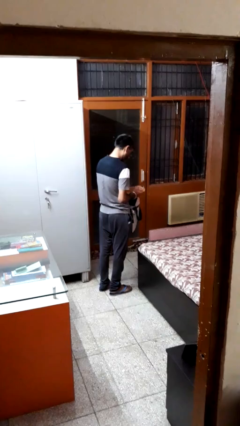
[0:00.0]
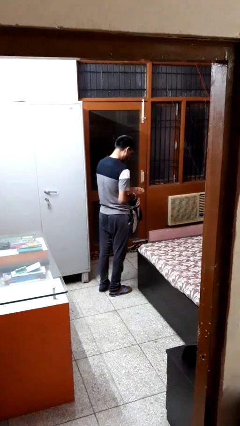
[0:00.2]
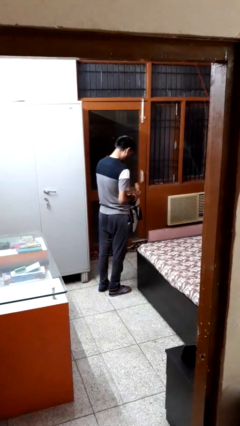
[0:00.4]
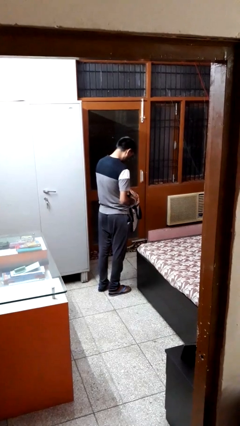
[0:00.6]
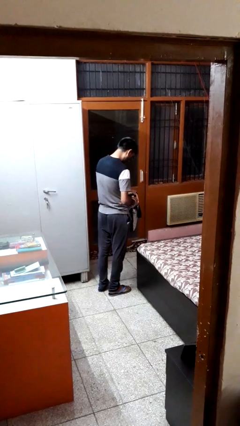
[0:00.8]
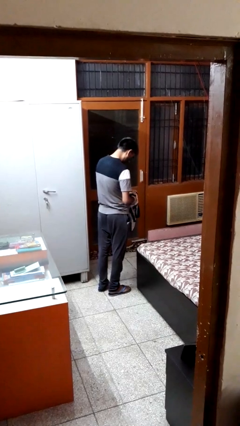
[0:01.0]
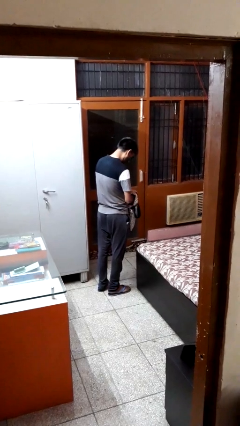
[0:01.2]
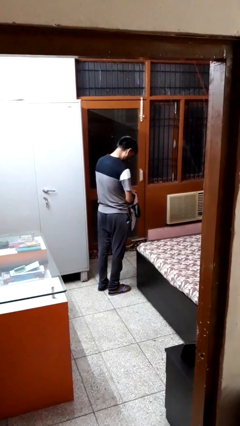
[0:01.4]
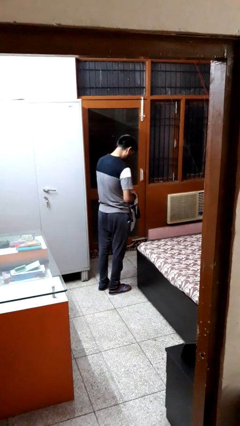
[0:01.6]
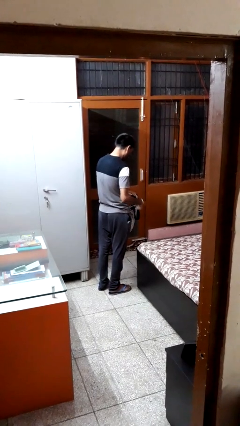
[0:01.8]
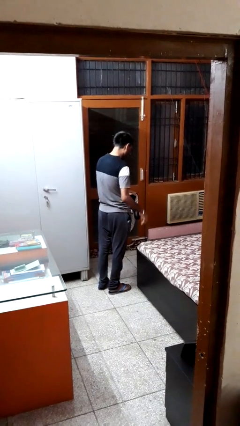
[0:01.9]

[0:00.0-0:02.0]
person puts object into bag

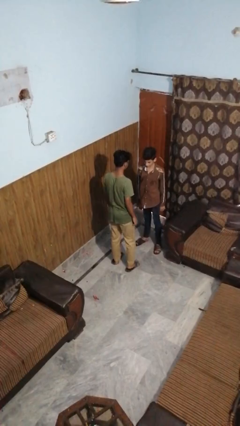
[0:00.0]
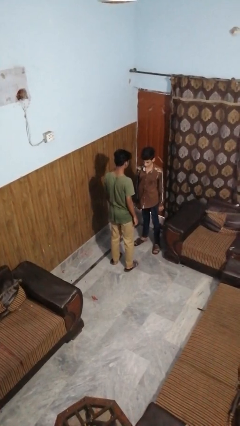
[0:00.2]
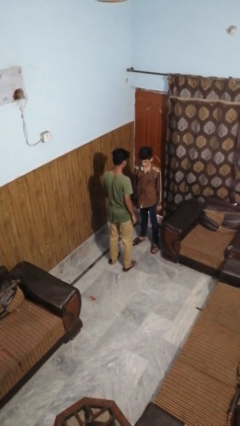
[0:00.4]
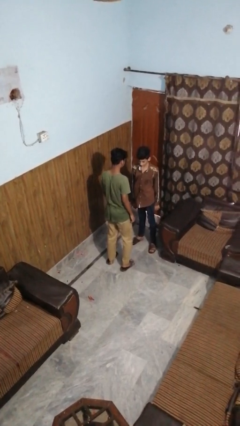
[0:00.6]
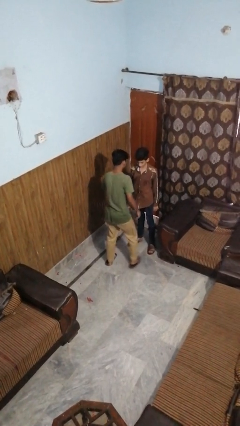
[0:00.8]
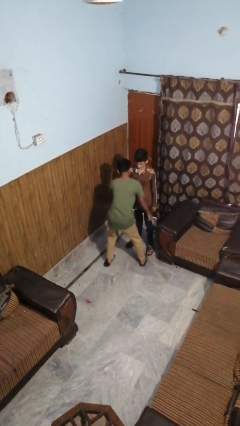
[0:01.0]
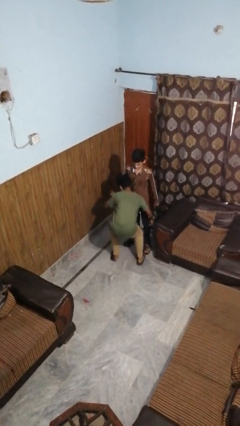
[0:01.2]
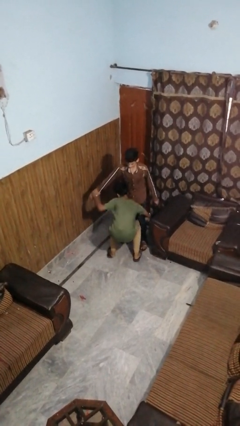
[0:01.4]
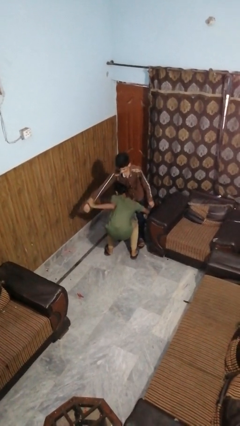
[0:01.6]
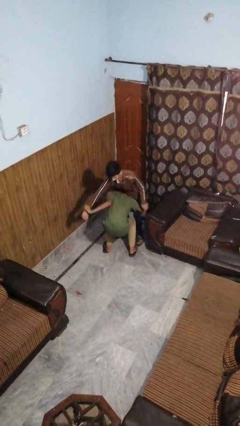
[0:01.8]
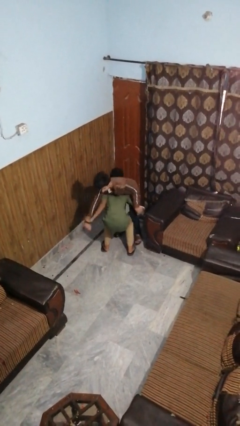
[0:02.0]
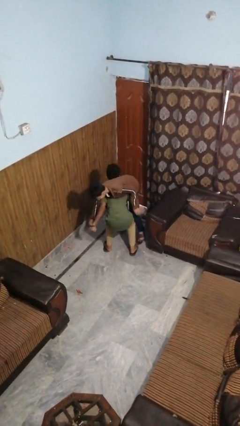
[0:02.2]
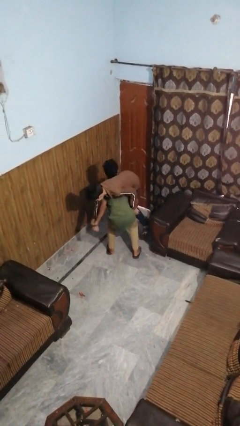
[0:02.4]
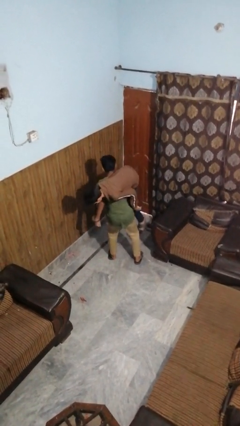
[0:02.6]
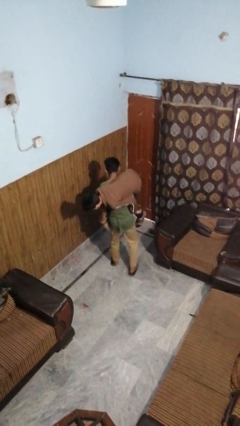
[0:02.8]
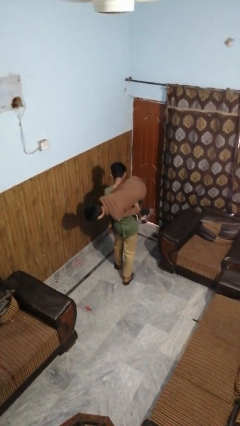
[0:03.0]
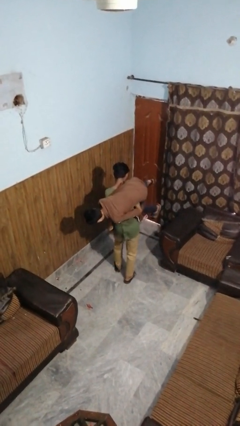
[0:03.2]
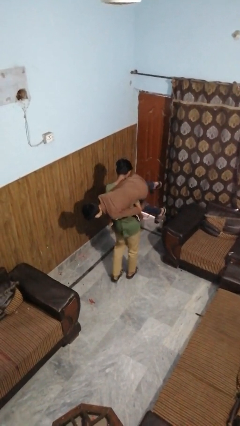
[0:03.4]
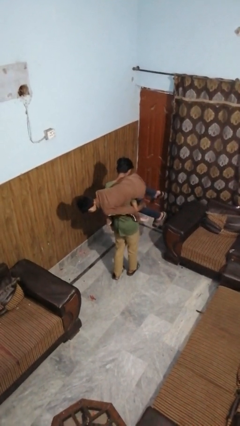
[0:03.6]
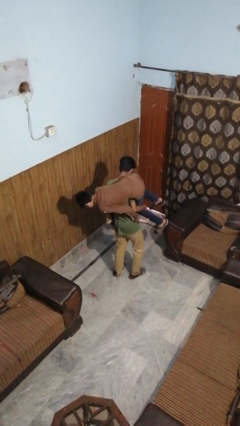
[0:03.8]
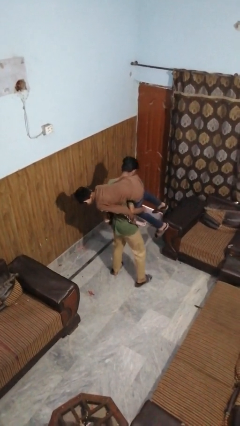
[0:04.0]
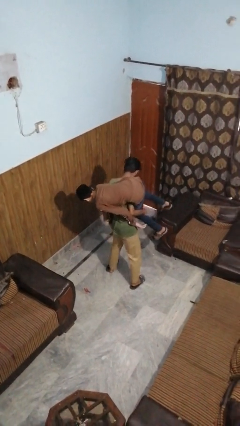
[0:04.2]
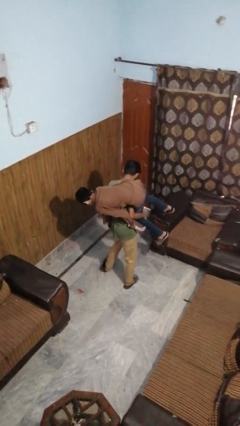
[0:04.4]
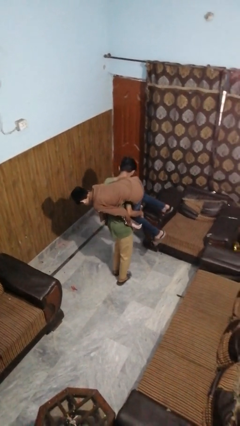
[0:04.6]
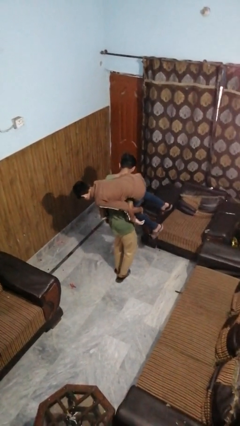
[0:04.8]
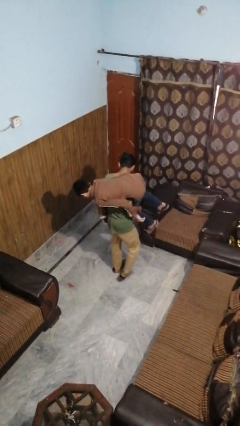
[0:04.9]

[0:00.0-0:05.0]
person carries person on shoulders

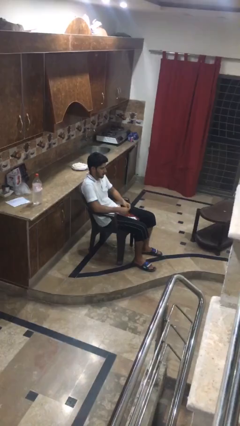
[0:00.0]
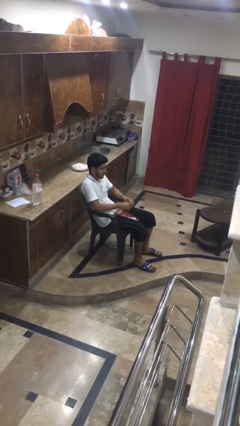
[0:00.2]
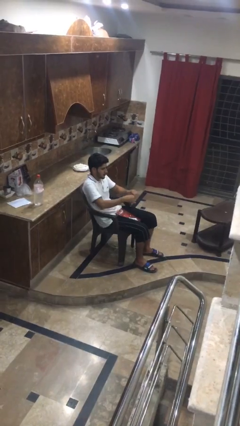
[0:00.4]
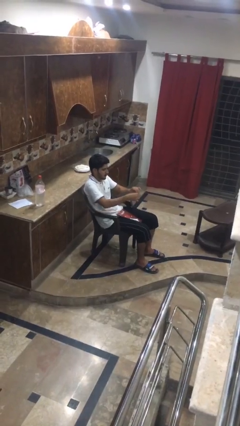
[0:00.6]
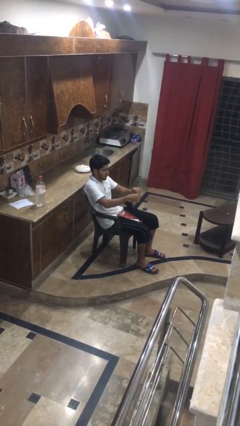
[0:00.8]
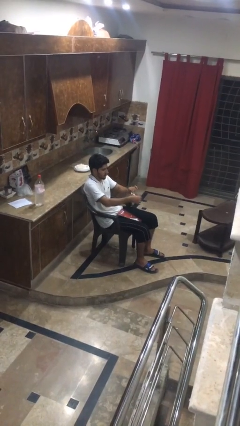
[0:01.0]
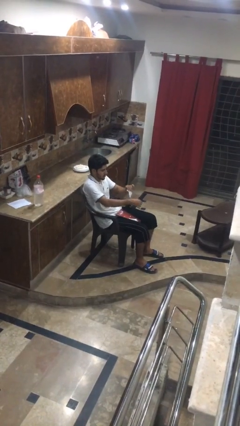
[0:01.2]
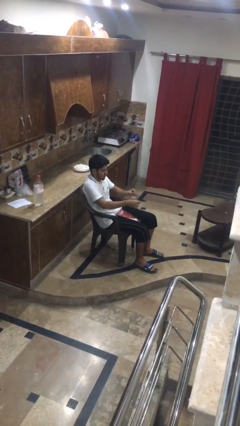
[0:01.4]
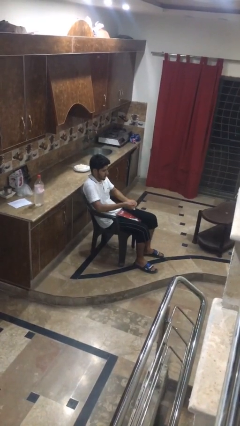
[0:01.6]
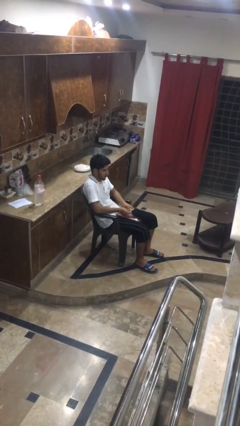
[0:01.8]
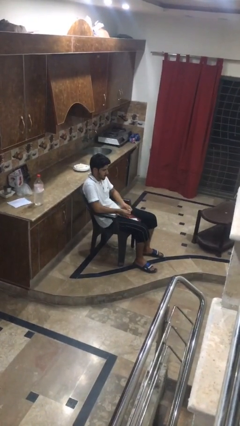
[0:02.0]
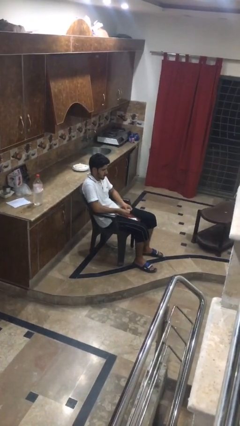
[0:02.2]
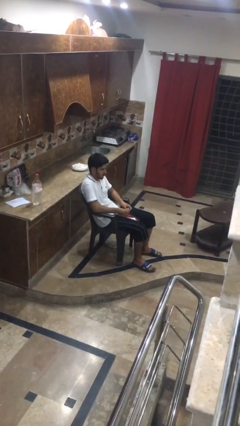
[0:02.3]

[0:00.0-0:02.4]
person tears paper

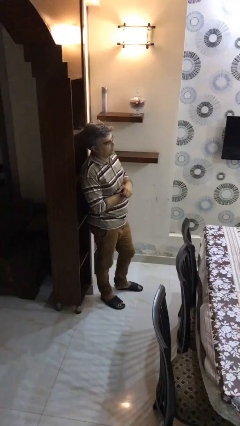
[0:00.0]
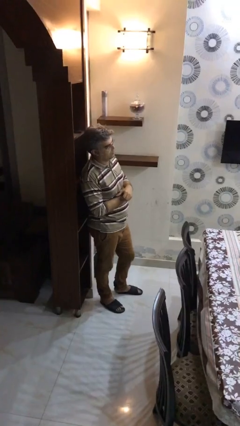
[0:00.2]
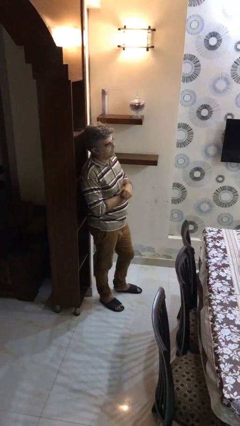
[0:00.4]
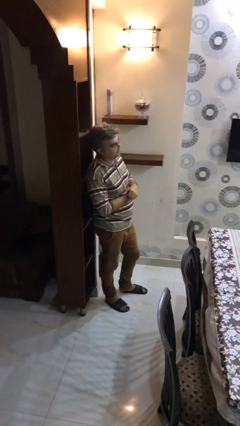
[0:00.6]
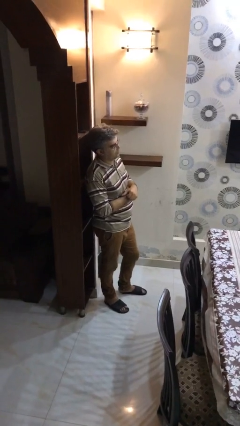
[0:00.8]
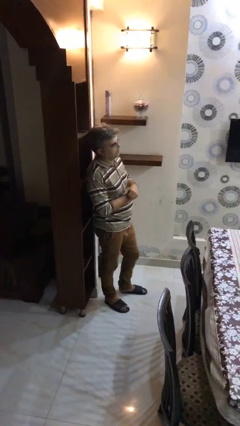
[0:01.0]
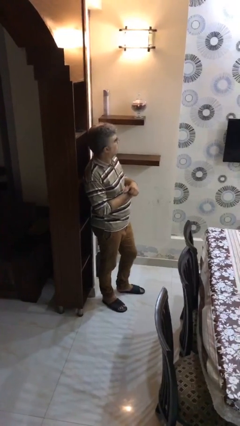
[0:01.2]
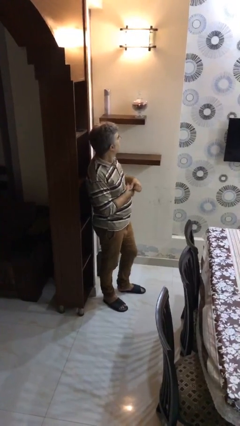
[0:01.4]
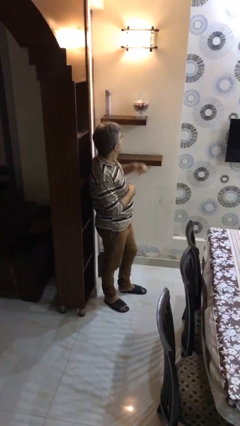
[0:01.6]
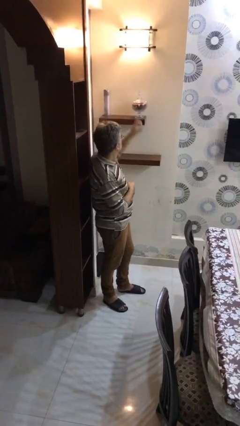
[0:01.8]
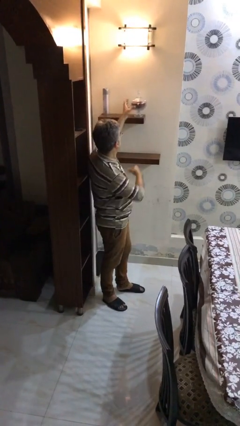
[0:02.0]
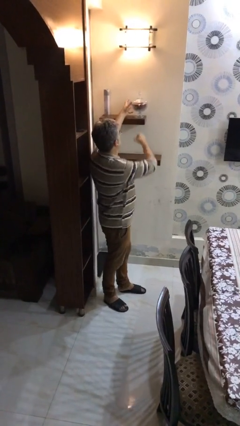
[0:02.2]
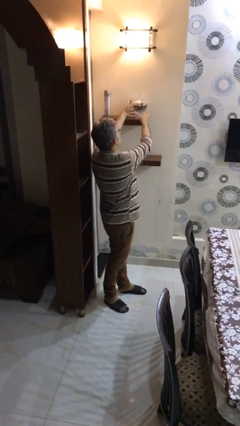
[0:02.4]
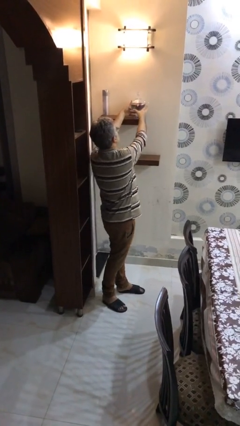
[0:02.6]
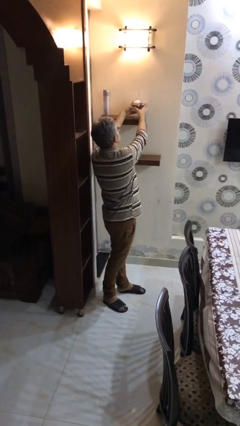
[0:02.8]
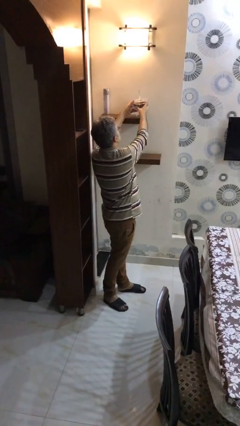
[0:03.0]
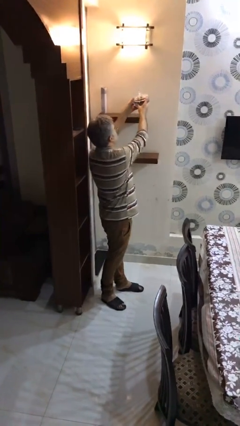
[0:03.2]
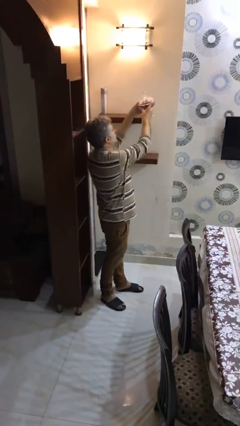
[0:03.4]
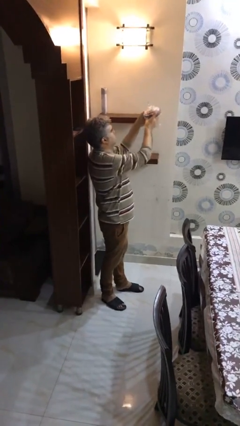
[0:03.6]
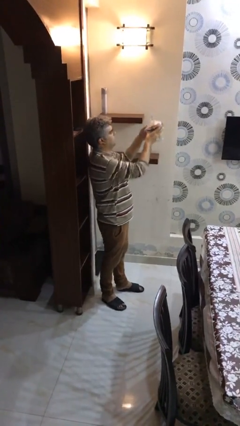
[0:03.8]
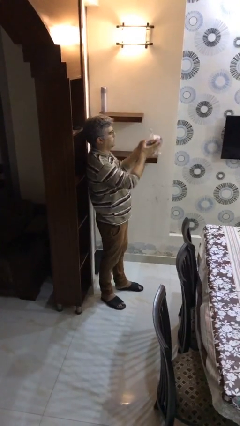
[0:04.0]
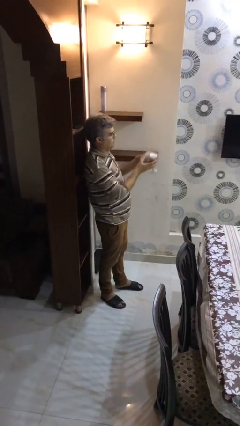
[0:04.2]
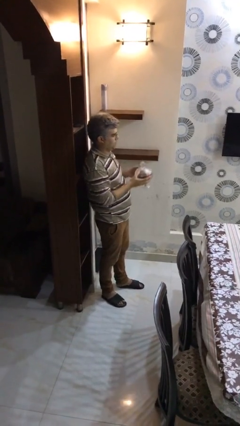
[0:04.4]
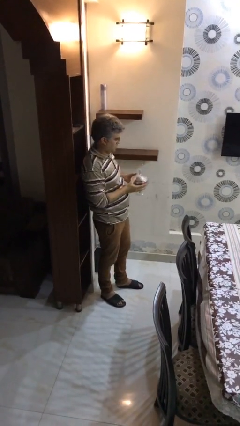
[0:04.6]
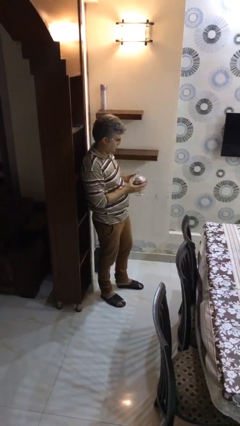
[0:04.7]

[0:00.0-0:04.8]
person picks up object from shelf

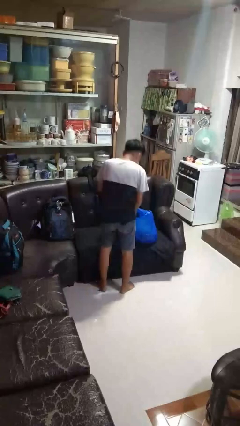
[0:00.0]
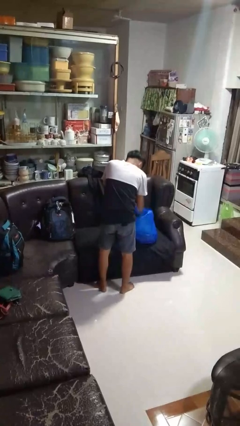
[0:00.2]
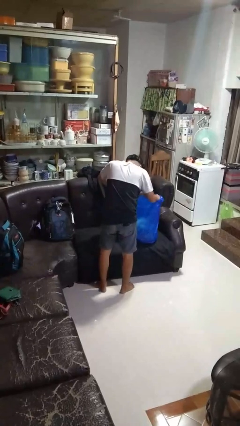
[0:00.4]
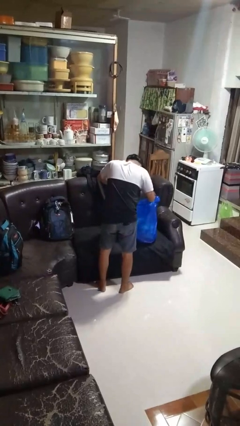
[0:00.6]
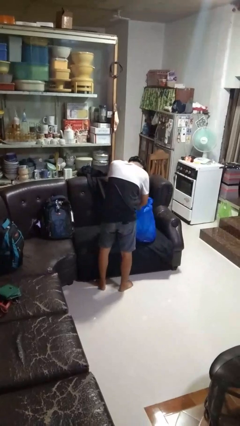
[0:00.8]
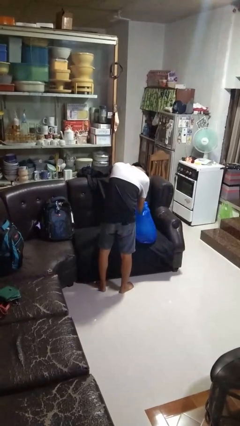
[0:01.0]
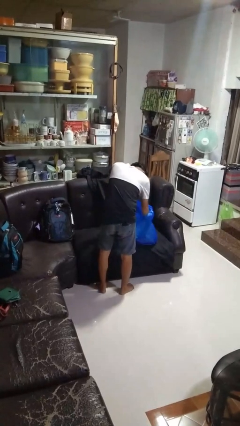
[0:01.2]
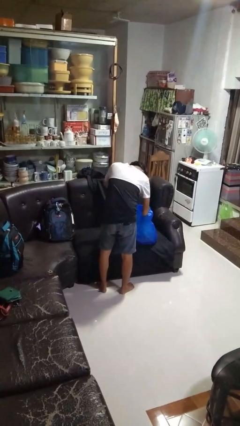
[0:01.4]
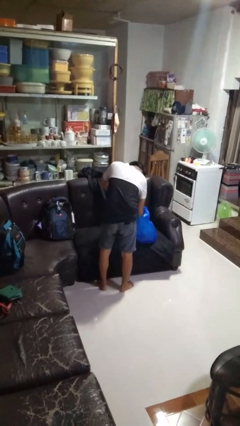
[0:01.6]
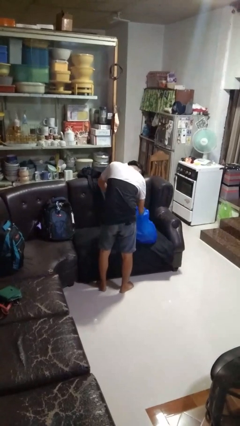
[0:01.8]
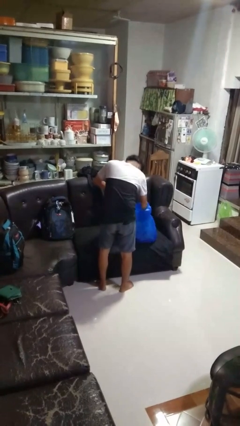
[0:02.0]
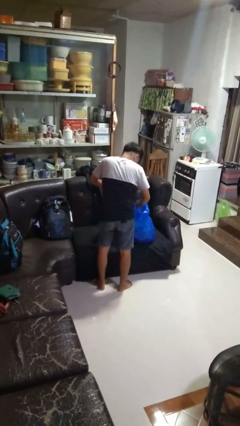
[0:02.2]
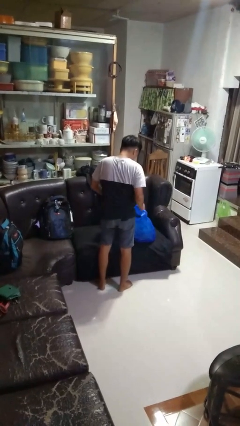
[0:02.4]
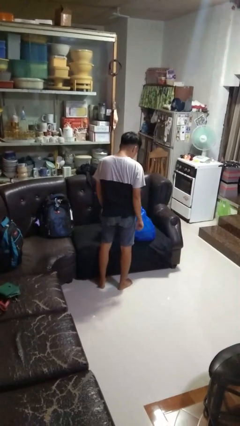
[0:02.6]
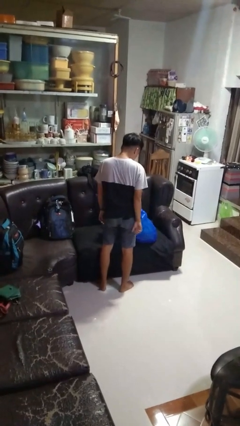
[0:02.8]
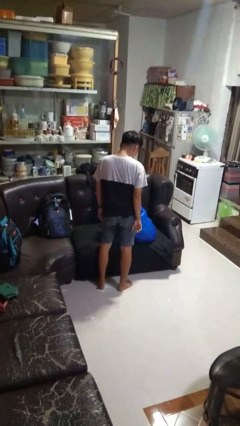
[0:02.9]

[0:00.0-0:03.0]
person searches in bag

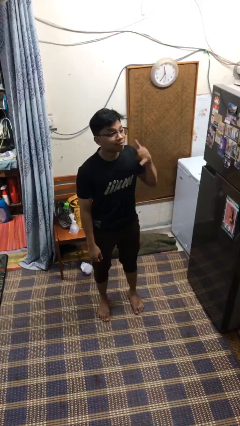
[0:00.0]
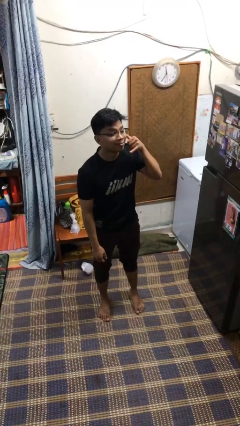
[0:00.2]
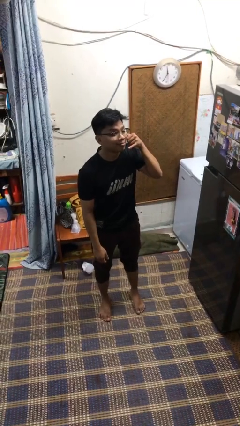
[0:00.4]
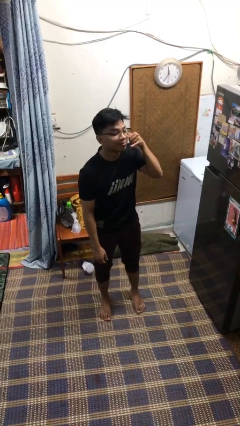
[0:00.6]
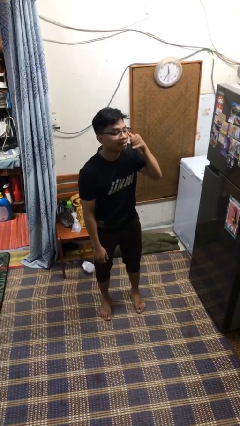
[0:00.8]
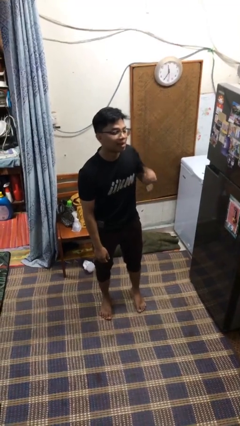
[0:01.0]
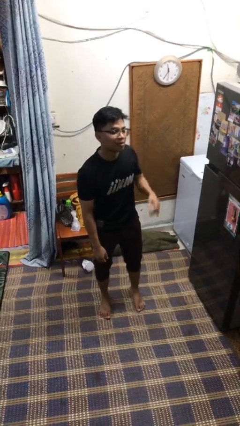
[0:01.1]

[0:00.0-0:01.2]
person gestures call me
